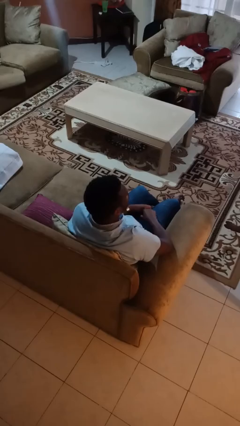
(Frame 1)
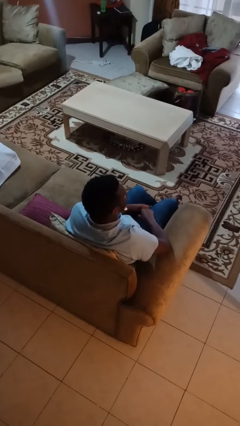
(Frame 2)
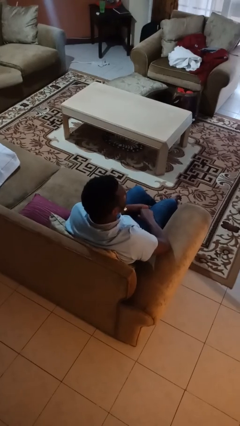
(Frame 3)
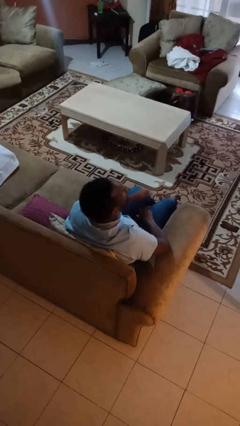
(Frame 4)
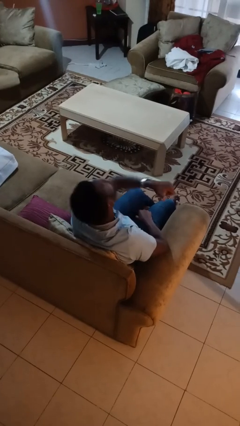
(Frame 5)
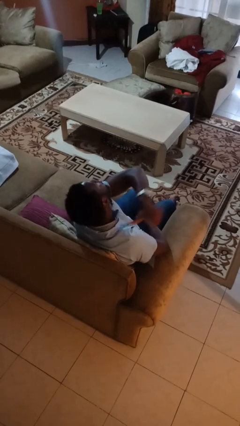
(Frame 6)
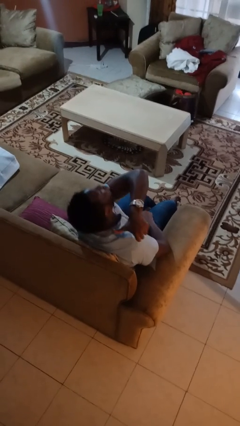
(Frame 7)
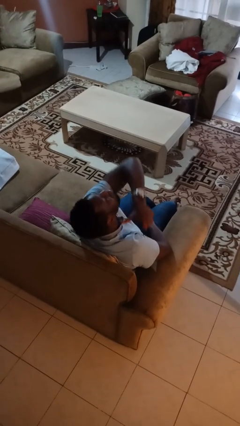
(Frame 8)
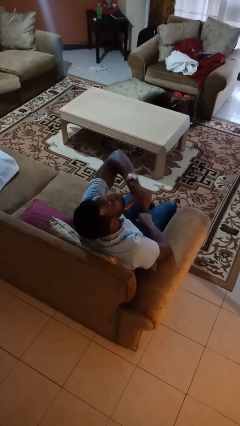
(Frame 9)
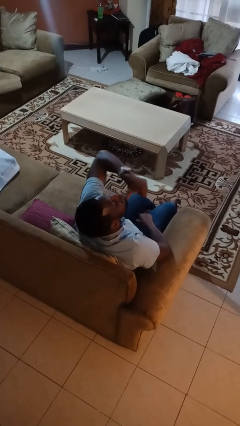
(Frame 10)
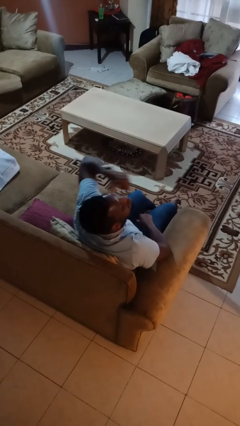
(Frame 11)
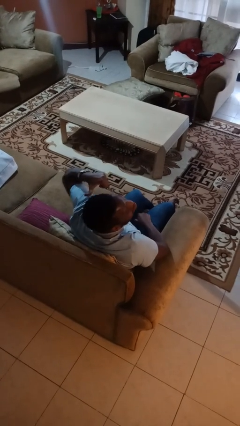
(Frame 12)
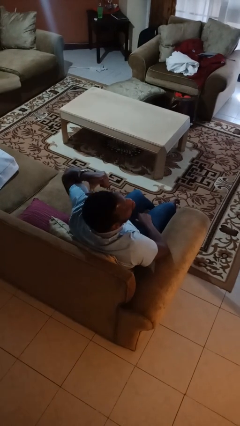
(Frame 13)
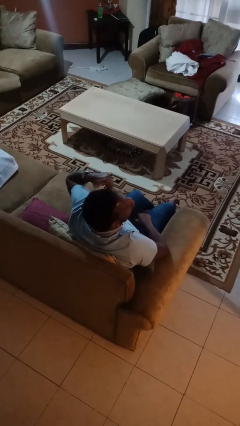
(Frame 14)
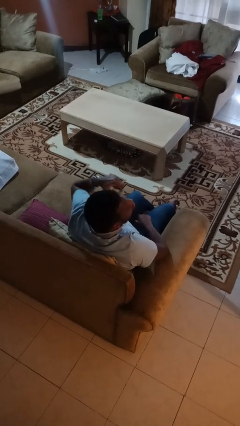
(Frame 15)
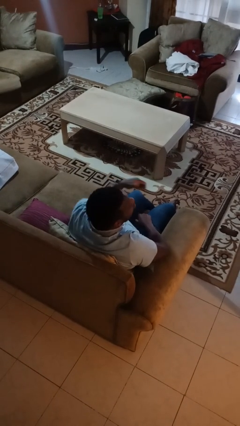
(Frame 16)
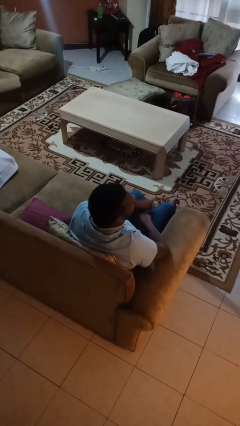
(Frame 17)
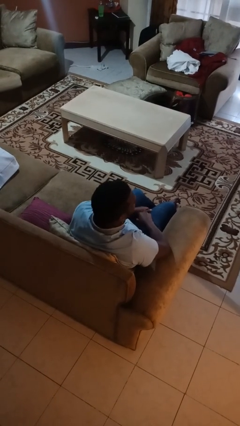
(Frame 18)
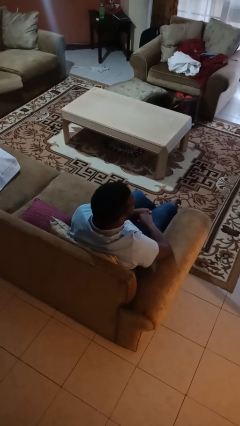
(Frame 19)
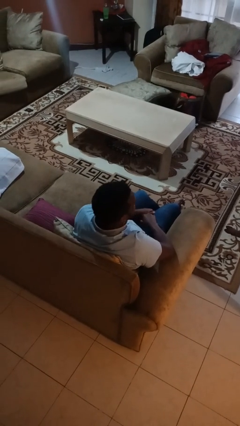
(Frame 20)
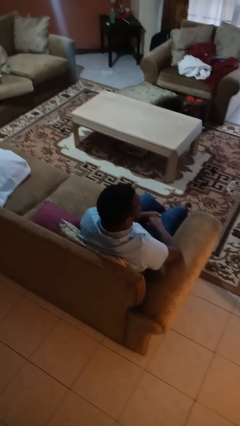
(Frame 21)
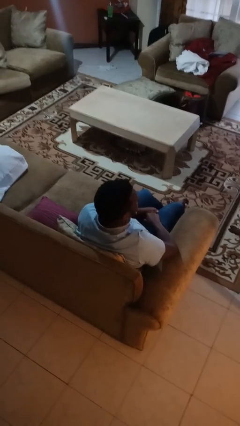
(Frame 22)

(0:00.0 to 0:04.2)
person gestures cut

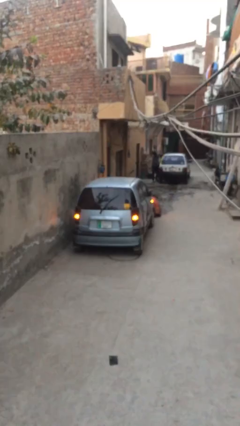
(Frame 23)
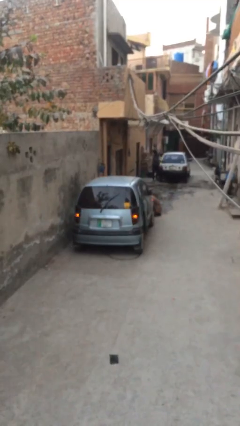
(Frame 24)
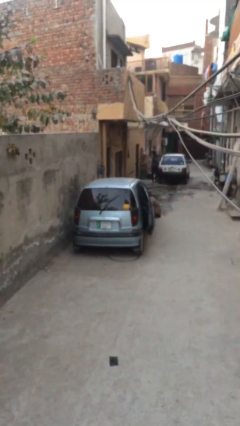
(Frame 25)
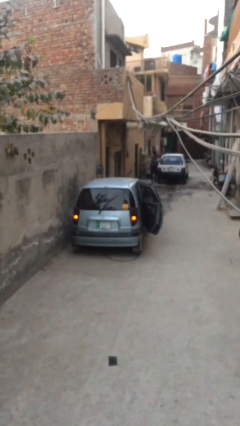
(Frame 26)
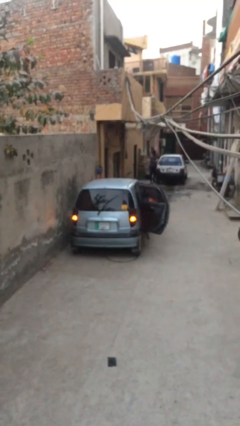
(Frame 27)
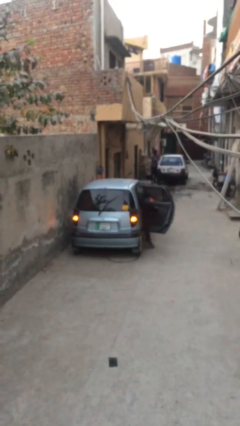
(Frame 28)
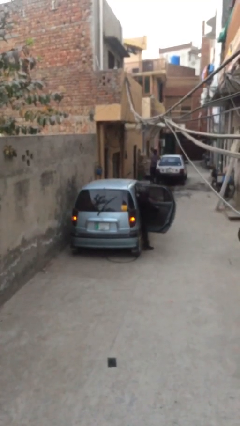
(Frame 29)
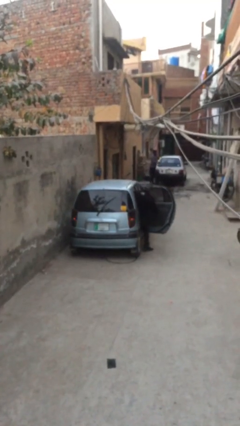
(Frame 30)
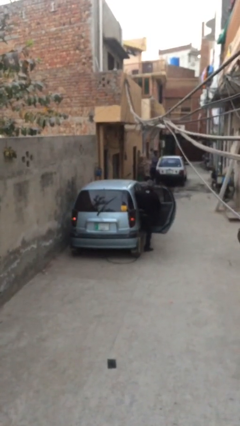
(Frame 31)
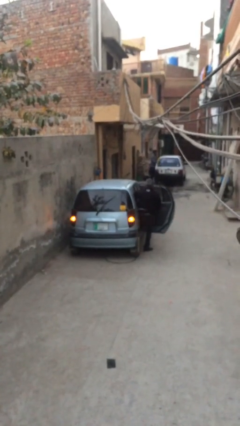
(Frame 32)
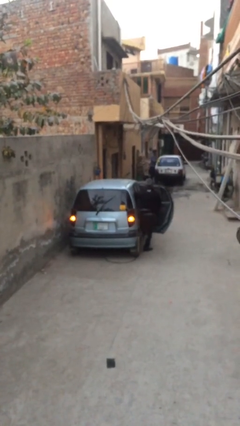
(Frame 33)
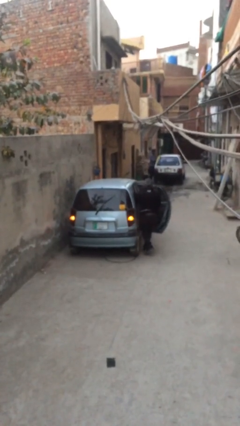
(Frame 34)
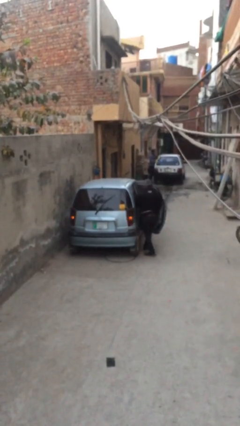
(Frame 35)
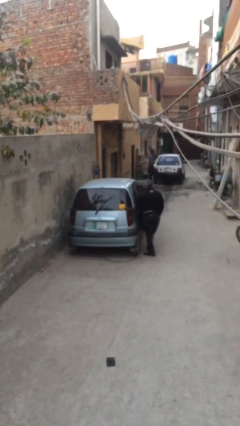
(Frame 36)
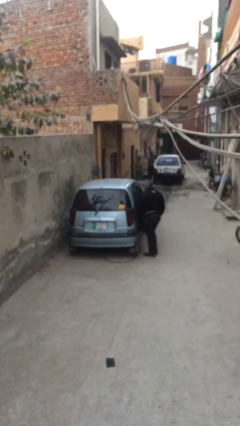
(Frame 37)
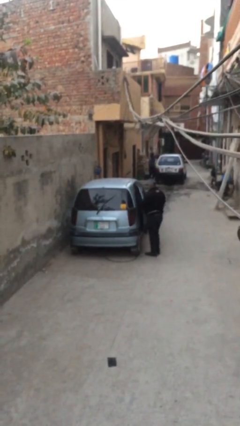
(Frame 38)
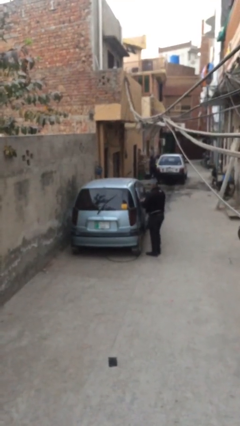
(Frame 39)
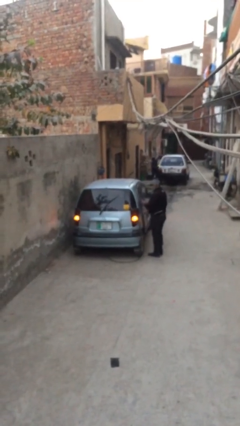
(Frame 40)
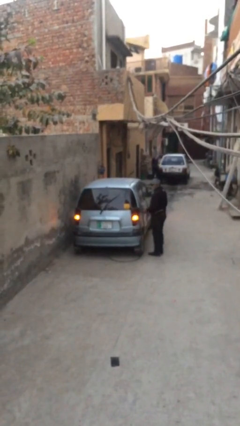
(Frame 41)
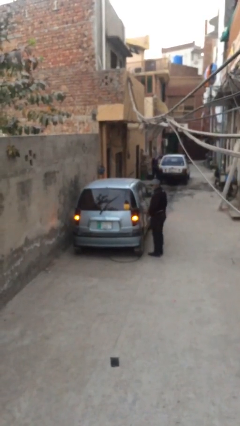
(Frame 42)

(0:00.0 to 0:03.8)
car drops off person

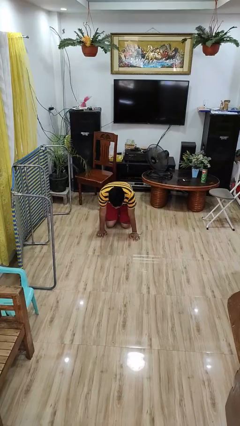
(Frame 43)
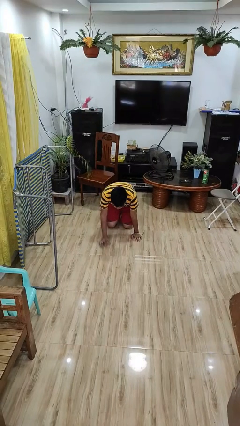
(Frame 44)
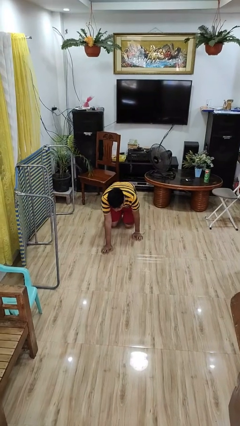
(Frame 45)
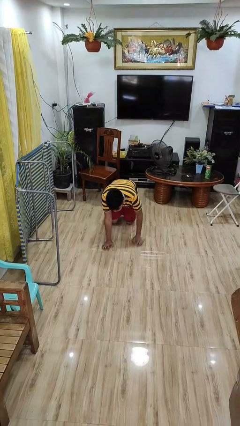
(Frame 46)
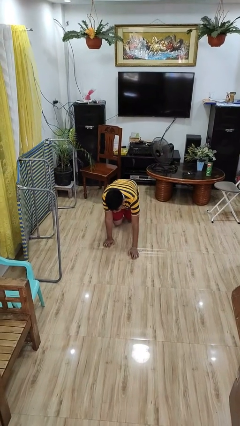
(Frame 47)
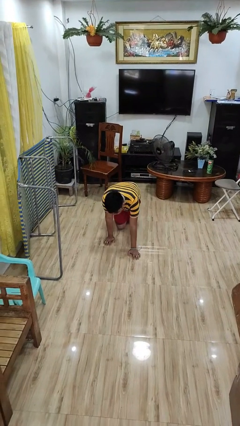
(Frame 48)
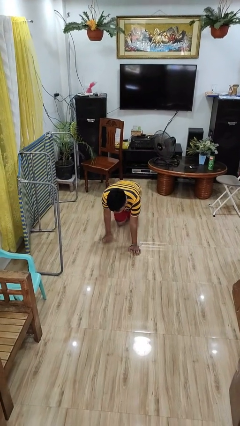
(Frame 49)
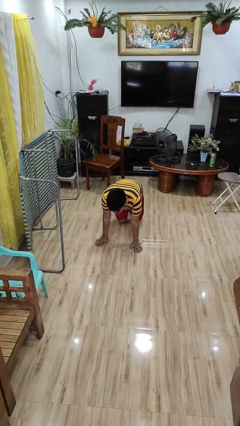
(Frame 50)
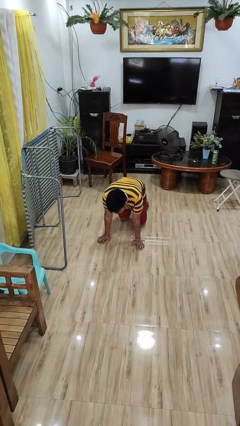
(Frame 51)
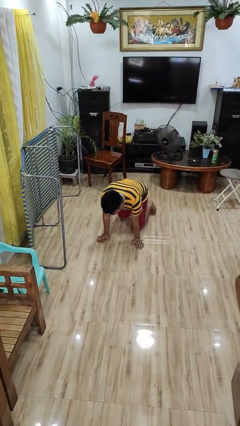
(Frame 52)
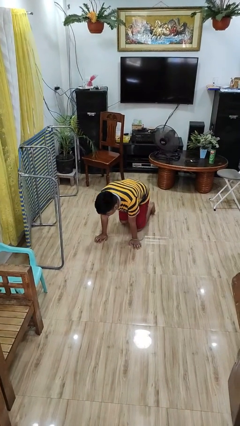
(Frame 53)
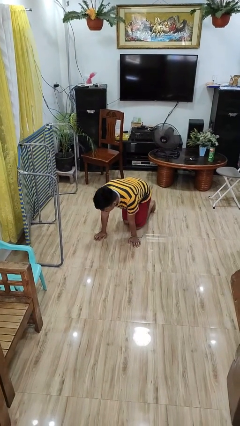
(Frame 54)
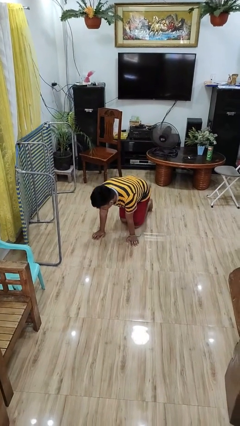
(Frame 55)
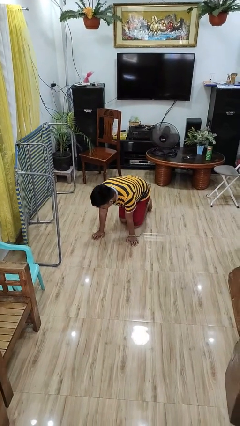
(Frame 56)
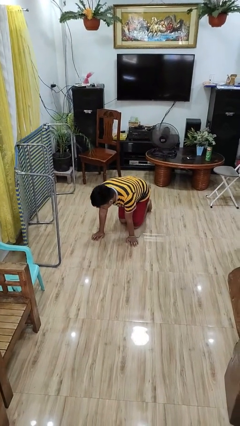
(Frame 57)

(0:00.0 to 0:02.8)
person crawls

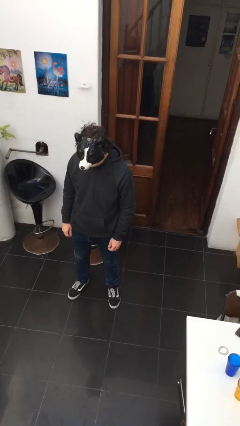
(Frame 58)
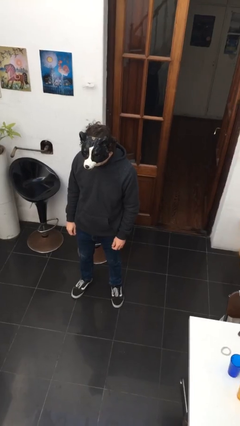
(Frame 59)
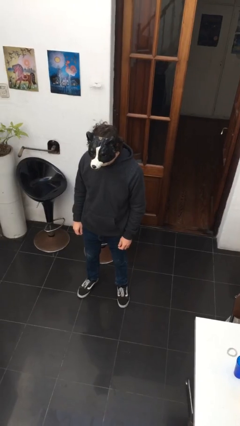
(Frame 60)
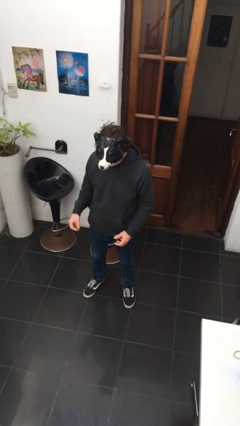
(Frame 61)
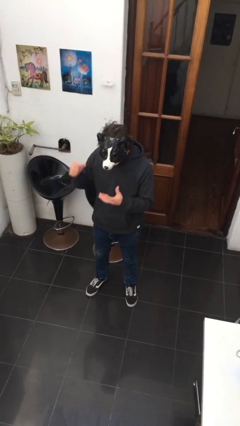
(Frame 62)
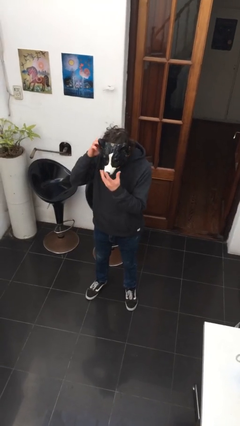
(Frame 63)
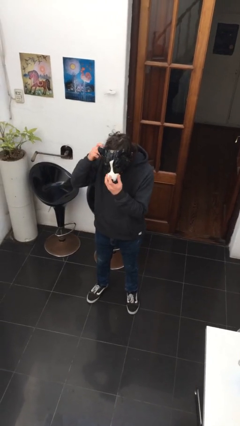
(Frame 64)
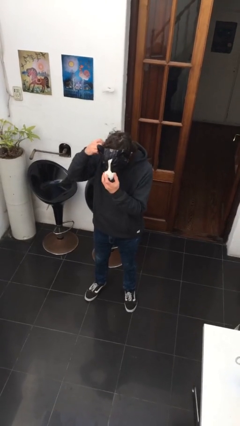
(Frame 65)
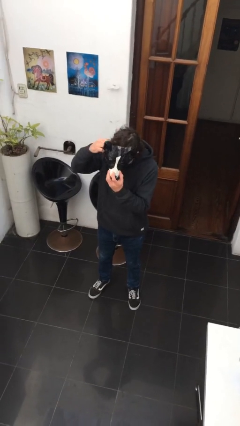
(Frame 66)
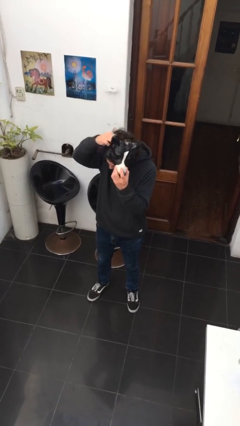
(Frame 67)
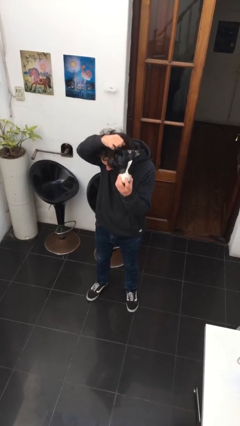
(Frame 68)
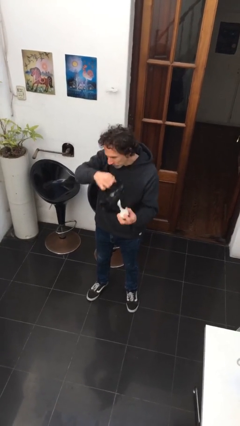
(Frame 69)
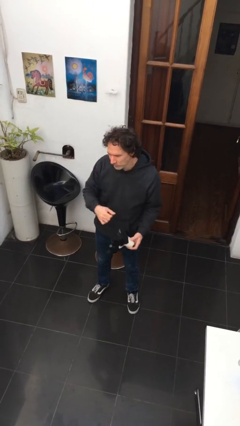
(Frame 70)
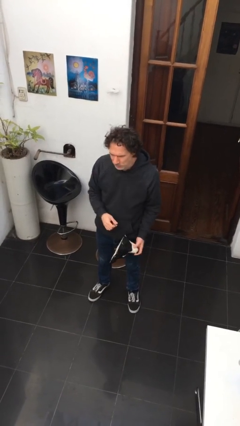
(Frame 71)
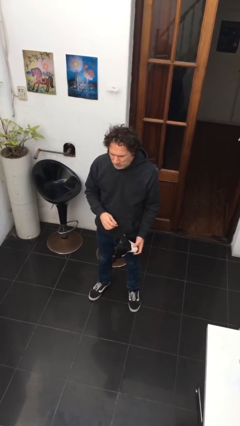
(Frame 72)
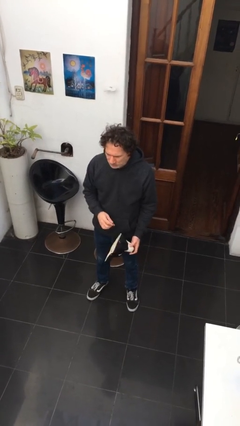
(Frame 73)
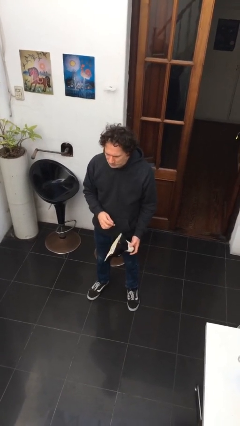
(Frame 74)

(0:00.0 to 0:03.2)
person takes off facemask

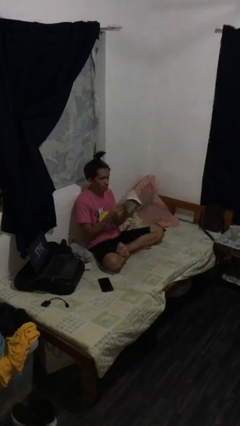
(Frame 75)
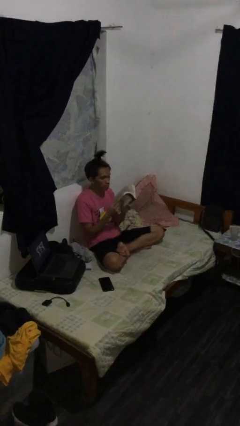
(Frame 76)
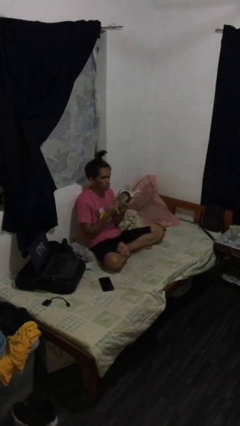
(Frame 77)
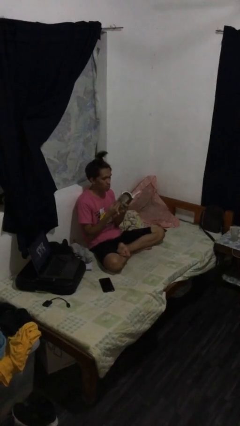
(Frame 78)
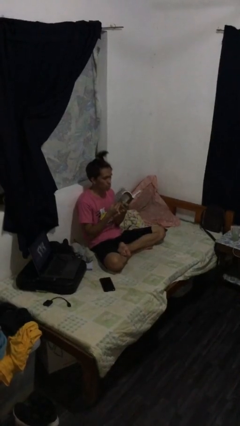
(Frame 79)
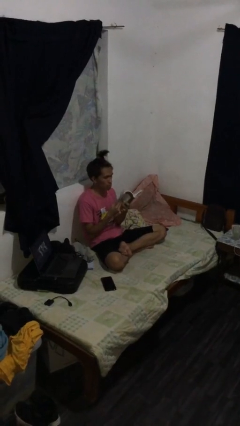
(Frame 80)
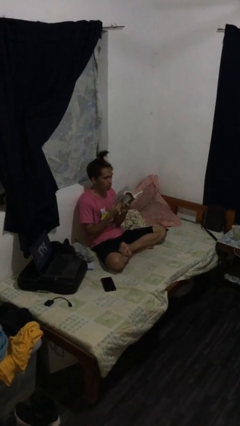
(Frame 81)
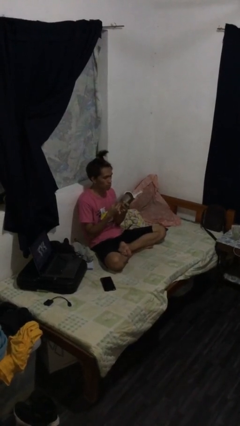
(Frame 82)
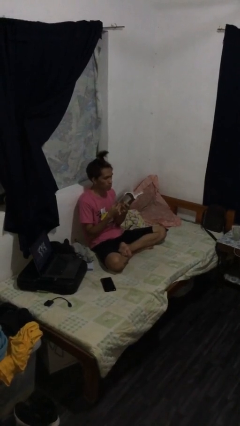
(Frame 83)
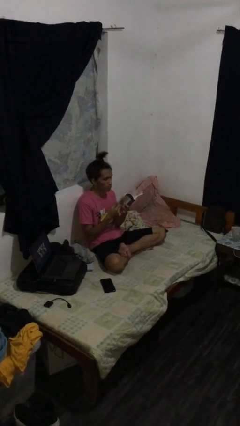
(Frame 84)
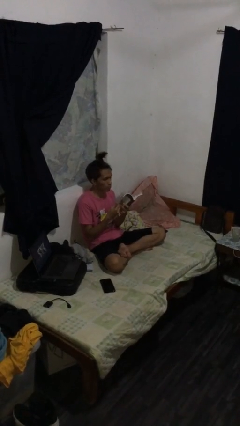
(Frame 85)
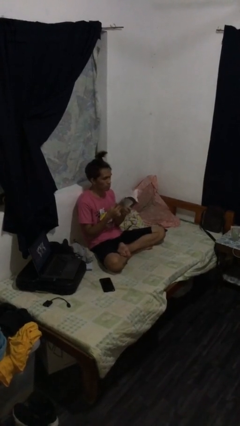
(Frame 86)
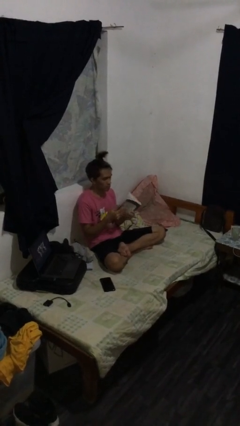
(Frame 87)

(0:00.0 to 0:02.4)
person reads document

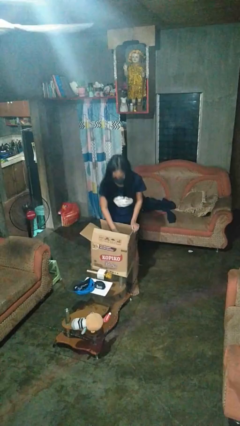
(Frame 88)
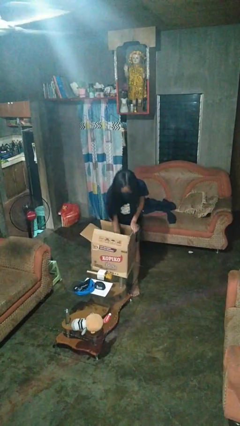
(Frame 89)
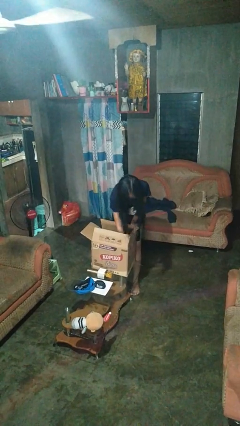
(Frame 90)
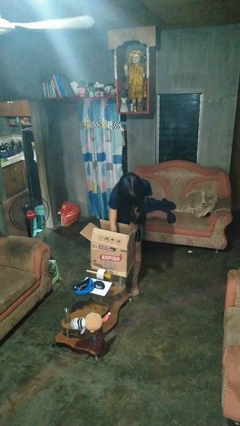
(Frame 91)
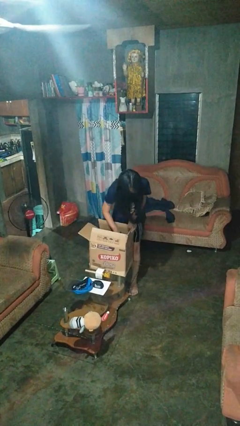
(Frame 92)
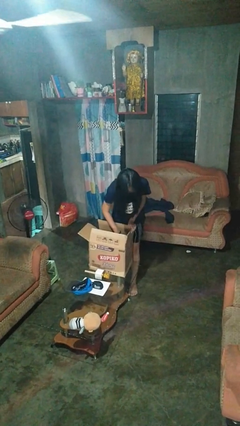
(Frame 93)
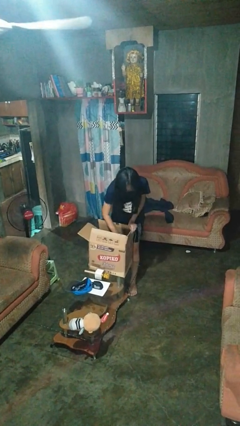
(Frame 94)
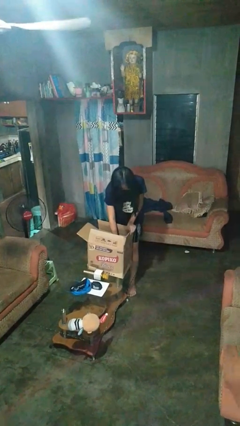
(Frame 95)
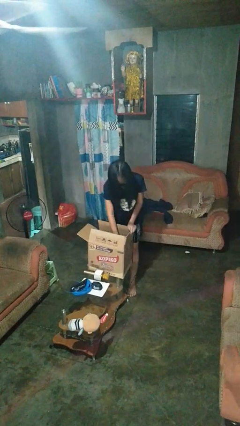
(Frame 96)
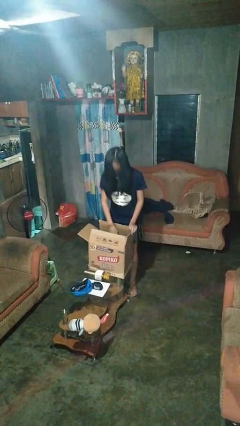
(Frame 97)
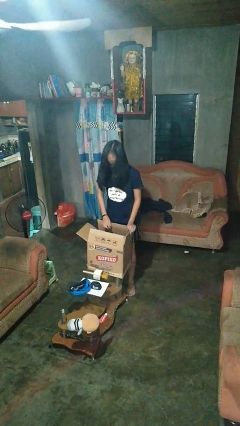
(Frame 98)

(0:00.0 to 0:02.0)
person searches in box
